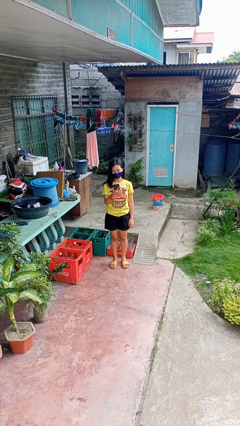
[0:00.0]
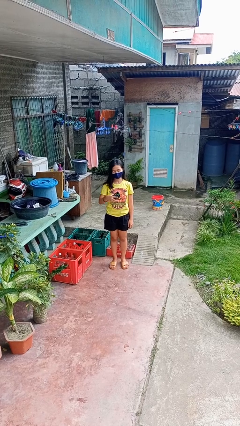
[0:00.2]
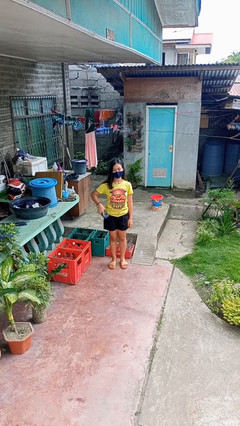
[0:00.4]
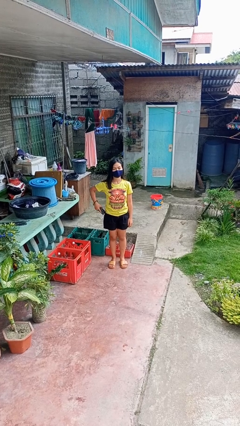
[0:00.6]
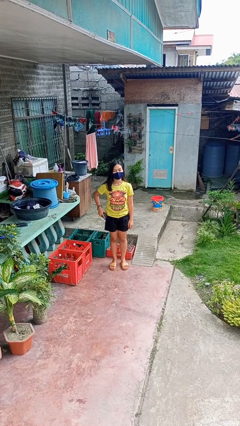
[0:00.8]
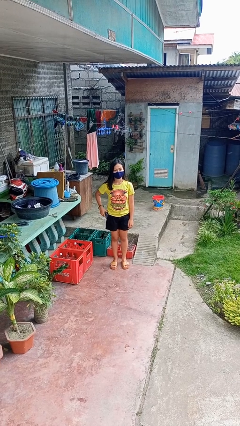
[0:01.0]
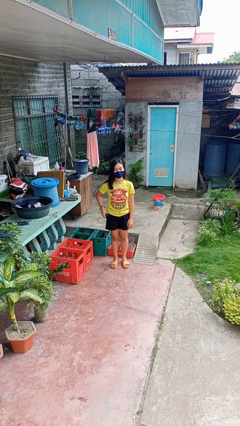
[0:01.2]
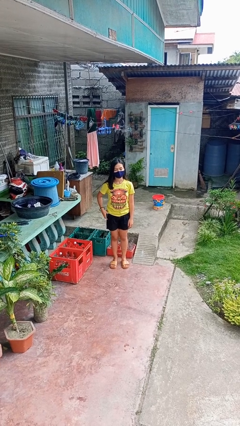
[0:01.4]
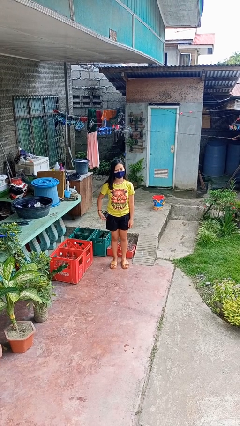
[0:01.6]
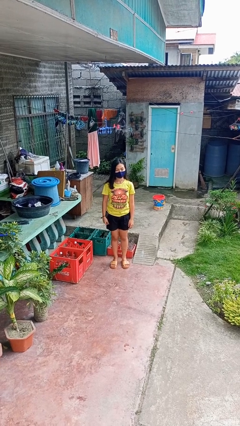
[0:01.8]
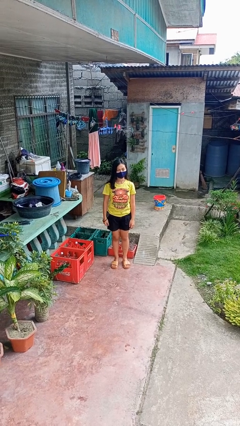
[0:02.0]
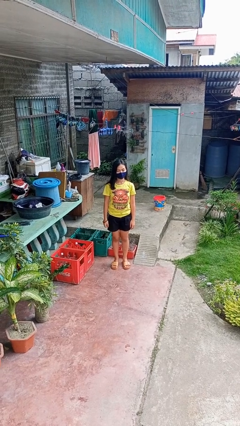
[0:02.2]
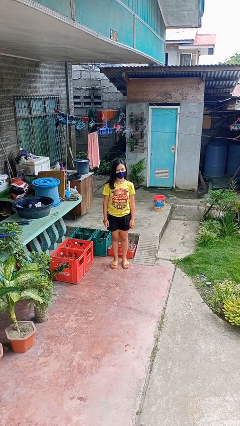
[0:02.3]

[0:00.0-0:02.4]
person puts phone into pocket

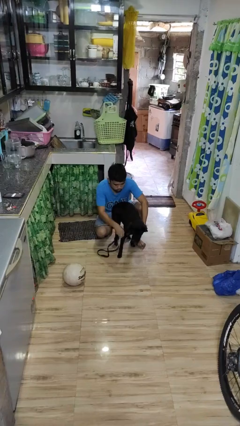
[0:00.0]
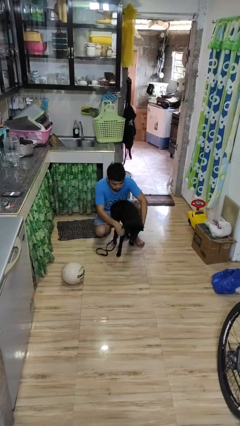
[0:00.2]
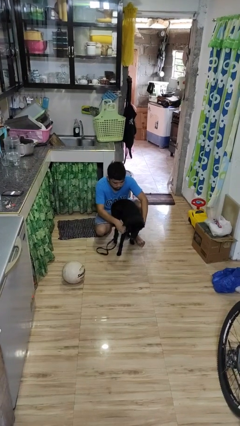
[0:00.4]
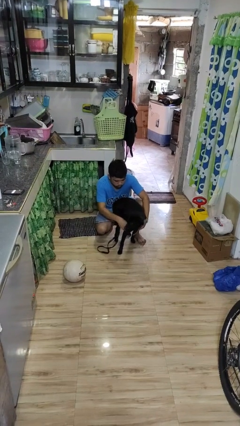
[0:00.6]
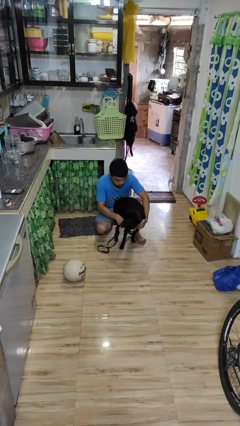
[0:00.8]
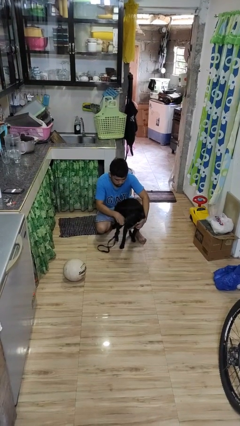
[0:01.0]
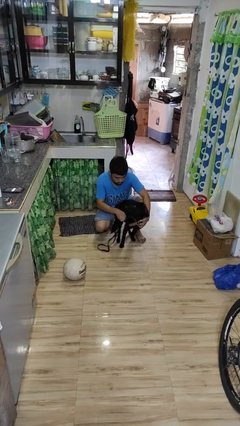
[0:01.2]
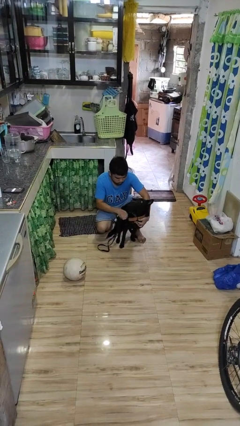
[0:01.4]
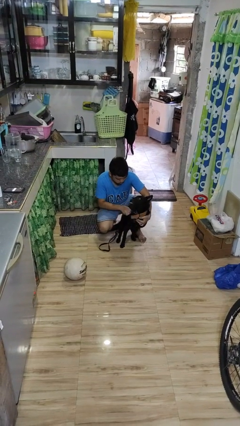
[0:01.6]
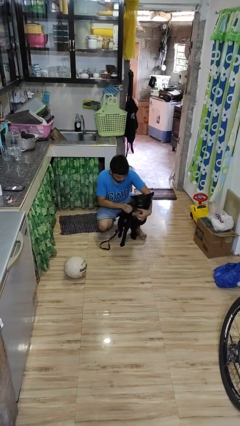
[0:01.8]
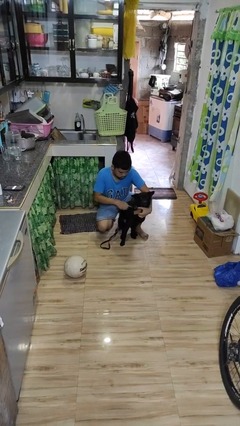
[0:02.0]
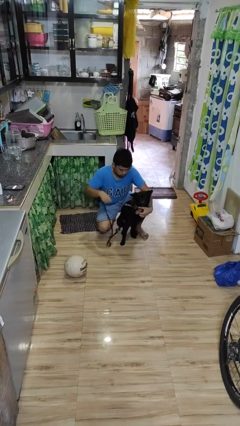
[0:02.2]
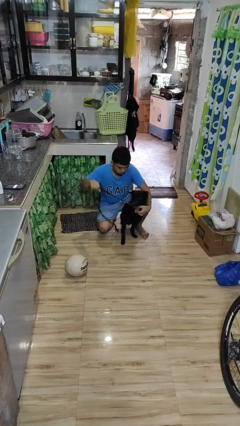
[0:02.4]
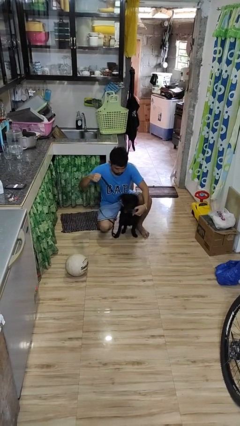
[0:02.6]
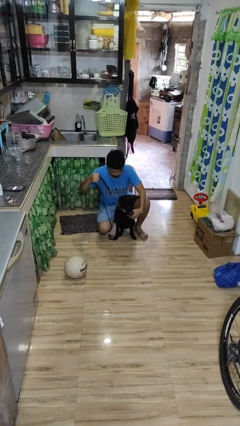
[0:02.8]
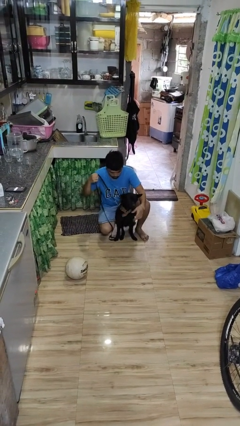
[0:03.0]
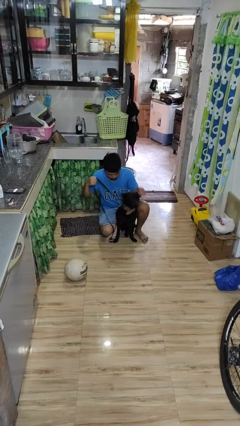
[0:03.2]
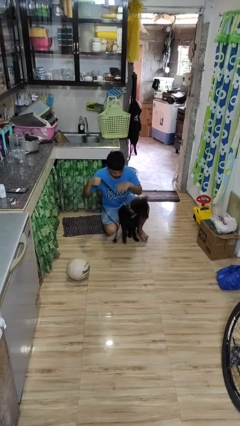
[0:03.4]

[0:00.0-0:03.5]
person attaches leash to dog

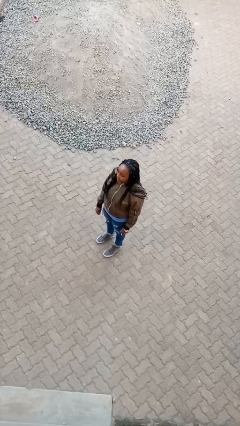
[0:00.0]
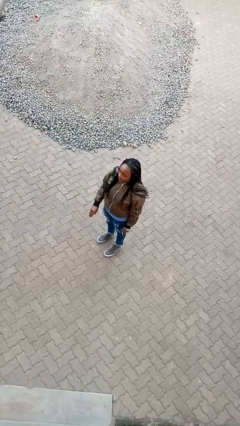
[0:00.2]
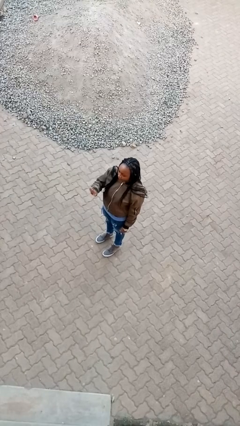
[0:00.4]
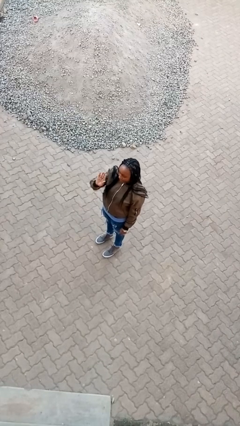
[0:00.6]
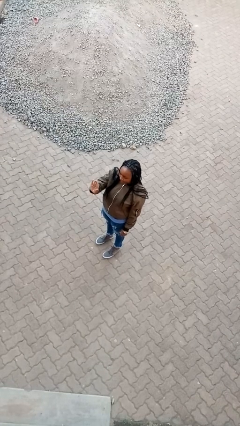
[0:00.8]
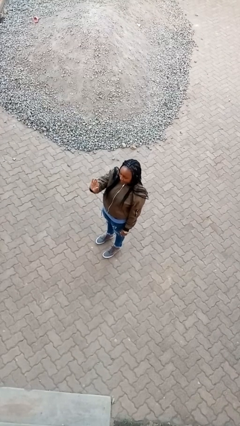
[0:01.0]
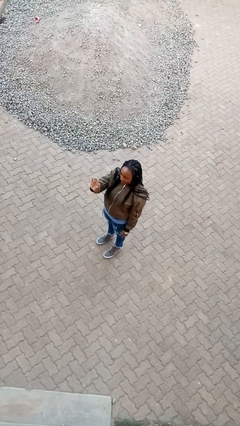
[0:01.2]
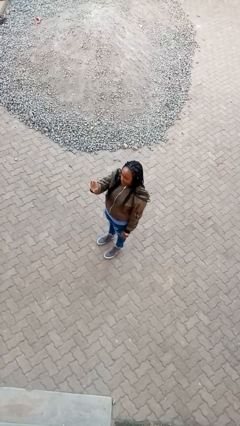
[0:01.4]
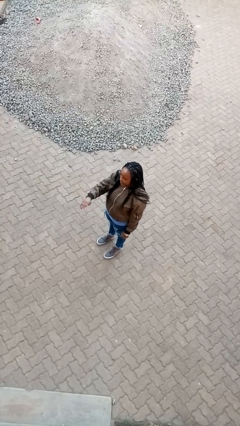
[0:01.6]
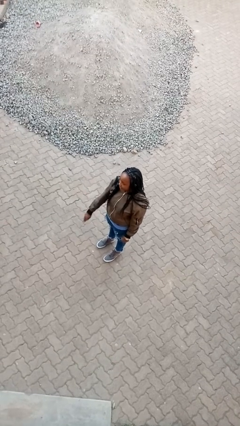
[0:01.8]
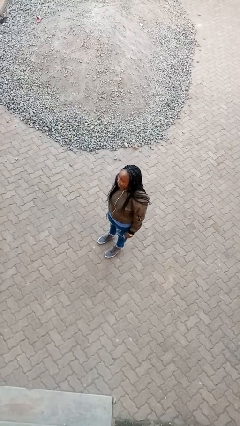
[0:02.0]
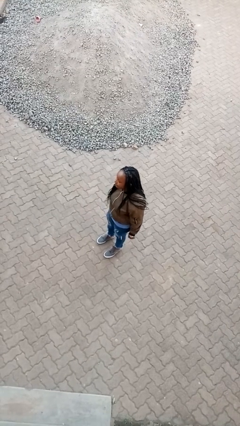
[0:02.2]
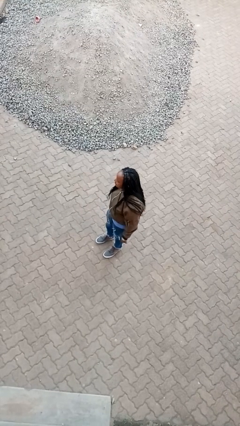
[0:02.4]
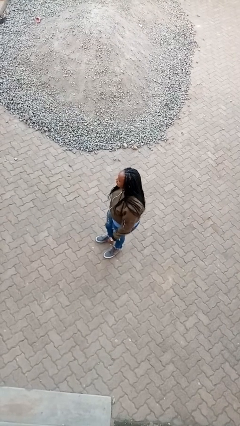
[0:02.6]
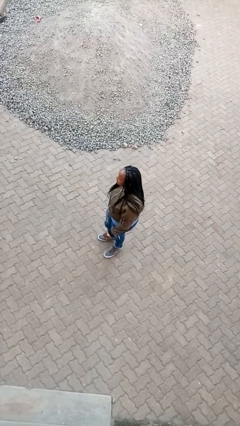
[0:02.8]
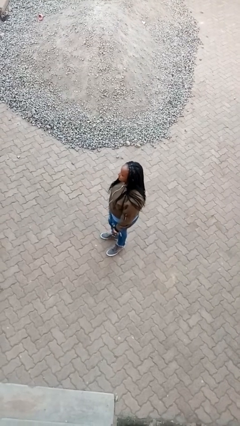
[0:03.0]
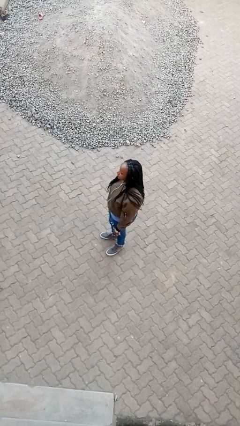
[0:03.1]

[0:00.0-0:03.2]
person gestures stop

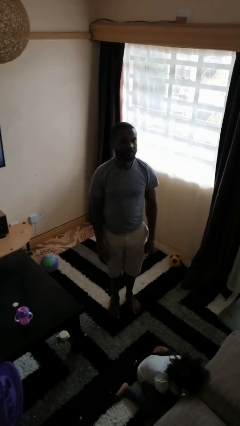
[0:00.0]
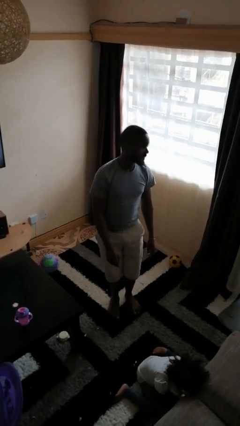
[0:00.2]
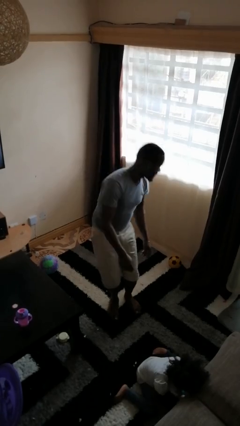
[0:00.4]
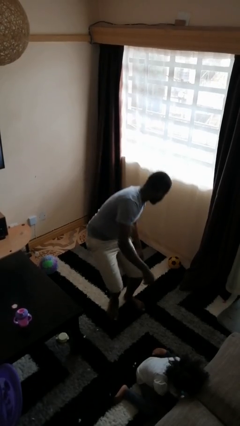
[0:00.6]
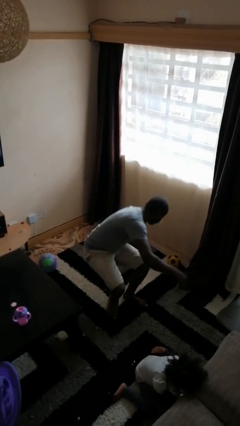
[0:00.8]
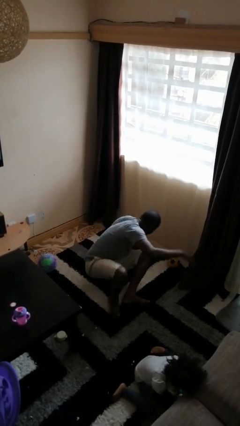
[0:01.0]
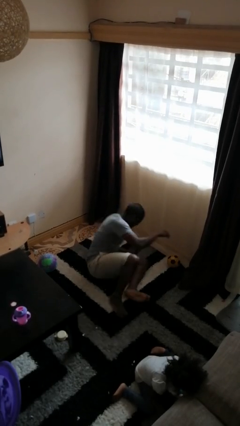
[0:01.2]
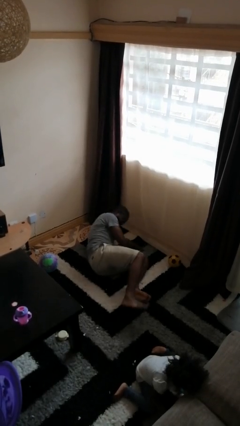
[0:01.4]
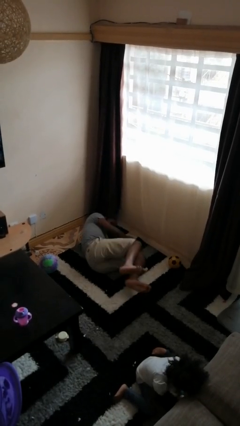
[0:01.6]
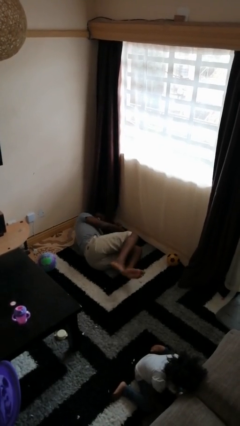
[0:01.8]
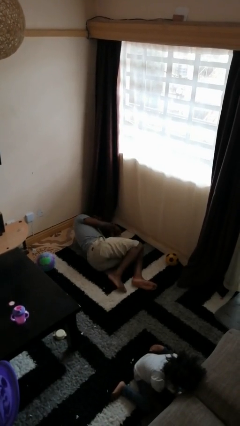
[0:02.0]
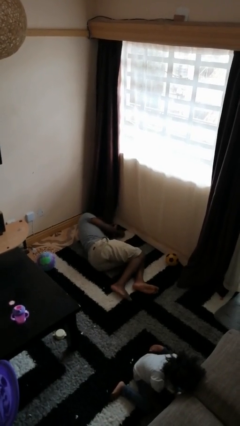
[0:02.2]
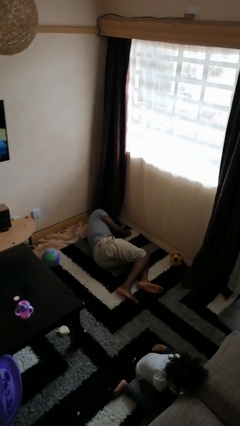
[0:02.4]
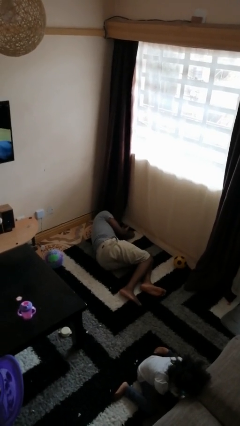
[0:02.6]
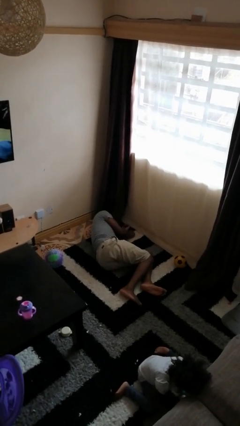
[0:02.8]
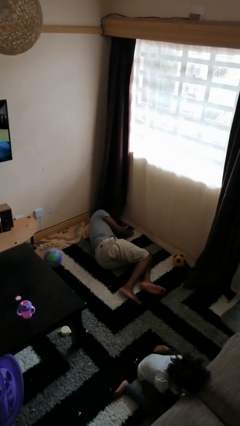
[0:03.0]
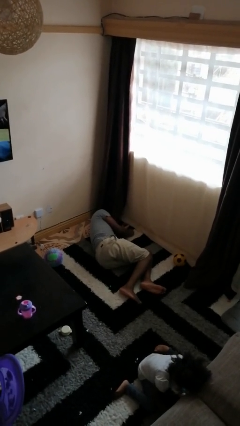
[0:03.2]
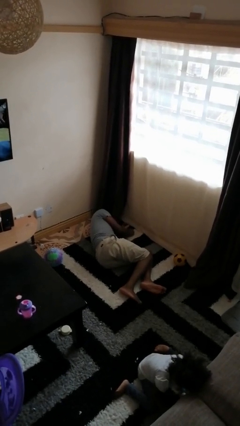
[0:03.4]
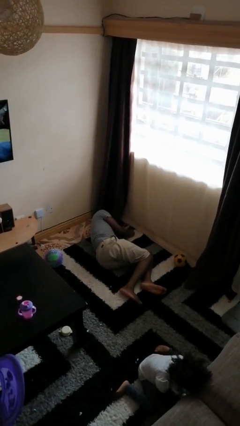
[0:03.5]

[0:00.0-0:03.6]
person falls while standing

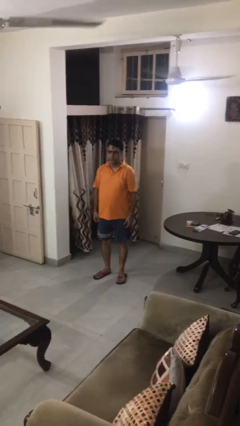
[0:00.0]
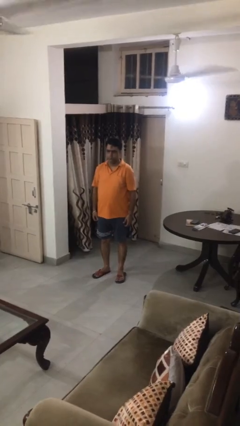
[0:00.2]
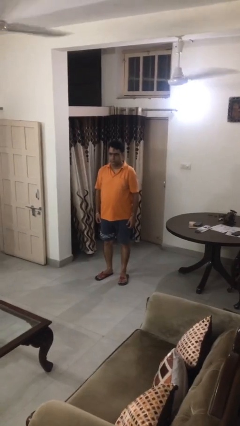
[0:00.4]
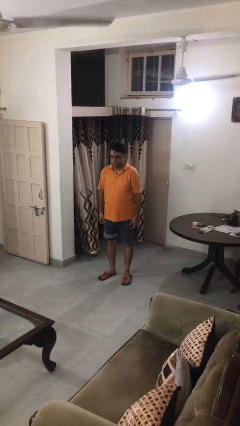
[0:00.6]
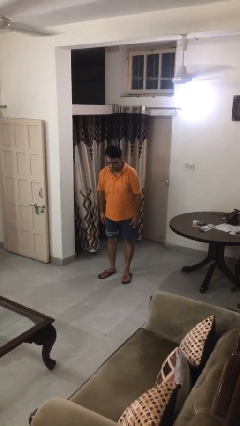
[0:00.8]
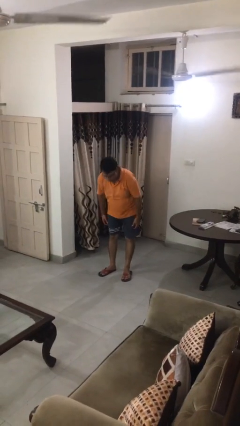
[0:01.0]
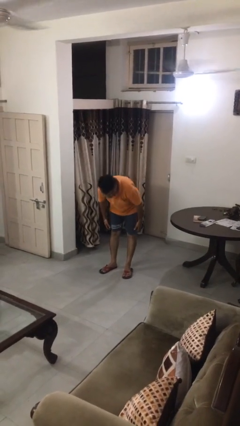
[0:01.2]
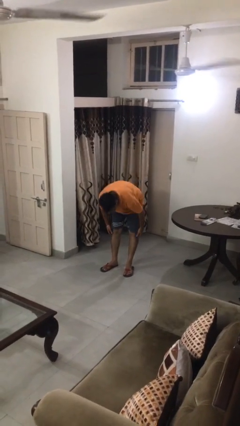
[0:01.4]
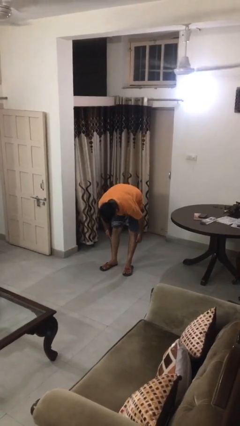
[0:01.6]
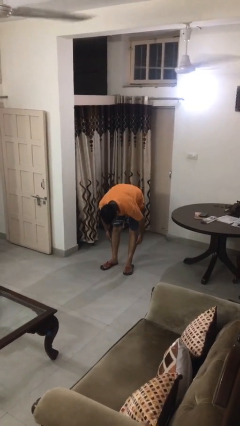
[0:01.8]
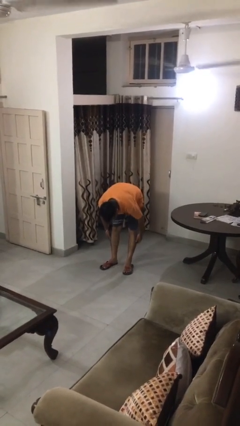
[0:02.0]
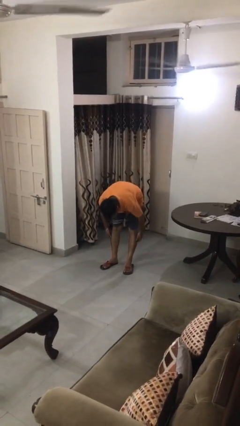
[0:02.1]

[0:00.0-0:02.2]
person bows

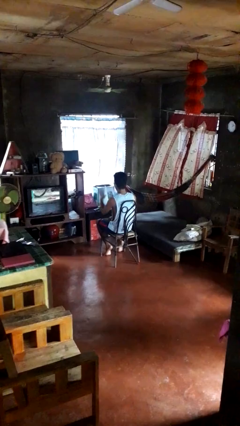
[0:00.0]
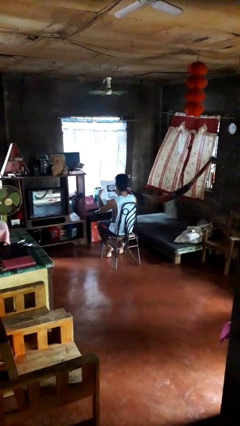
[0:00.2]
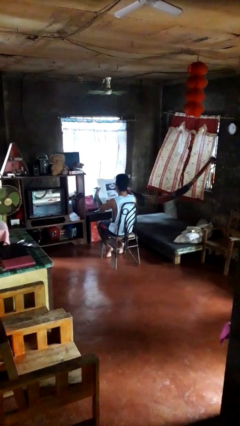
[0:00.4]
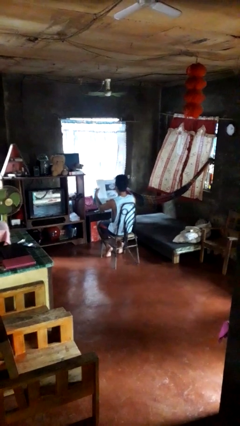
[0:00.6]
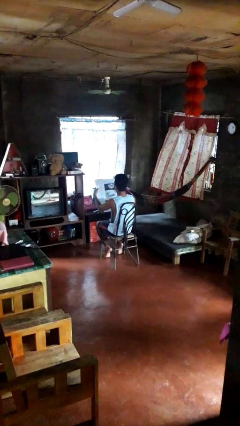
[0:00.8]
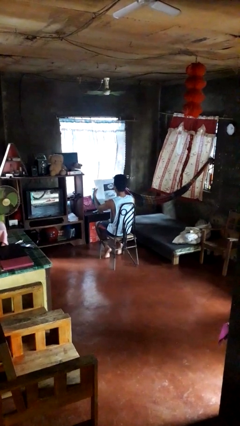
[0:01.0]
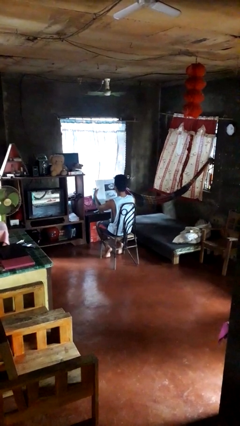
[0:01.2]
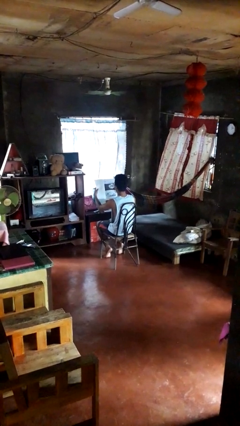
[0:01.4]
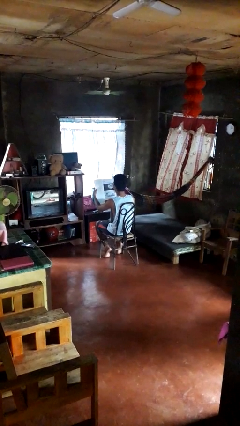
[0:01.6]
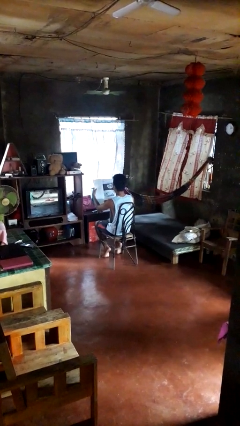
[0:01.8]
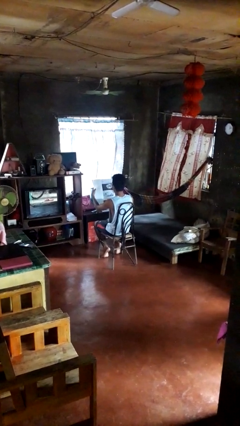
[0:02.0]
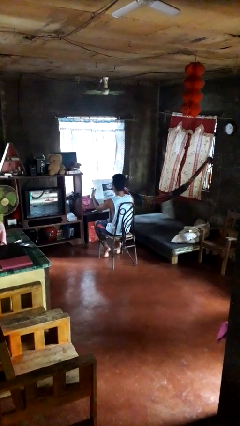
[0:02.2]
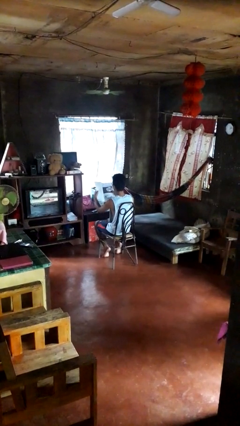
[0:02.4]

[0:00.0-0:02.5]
person reads newspaper

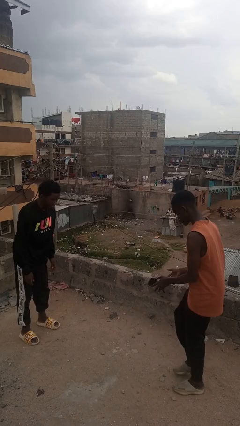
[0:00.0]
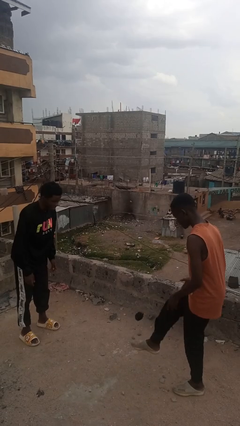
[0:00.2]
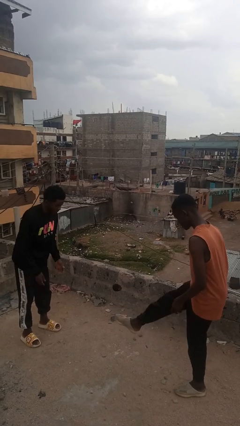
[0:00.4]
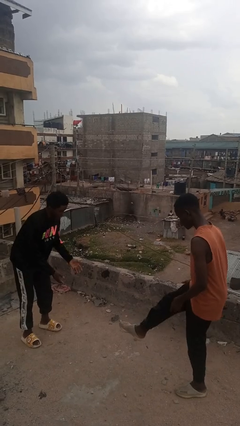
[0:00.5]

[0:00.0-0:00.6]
person kicks object to person
